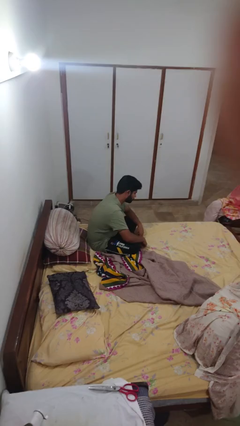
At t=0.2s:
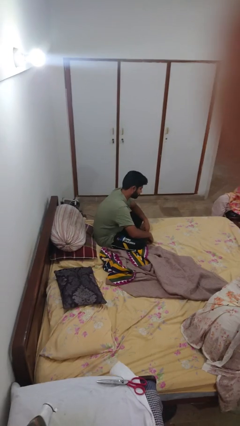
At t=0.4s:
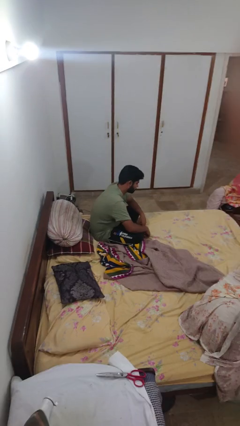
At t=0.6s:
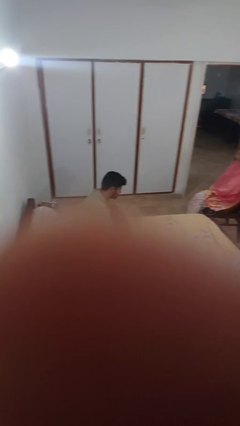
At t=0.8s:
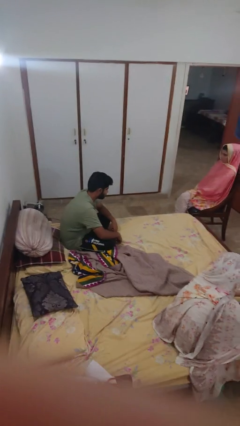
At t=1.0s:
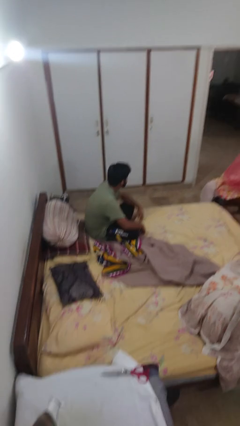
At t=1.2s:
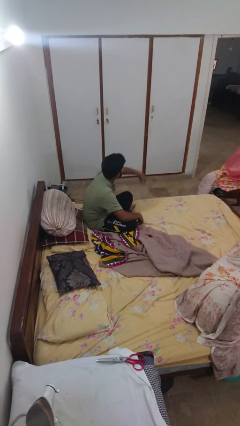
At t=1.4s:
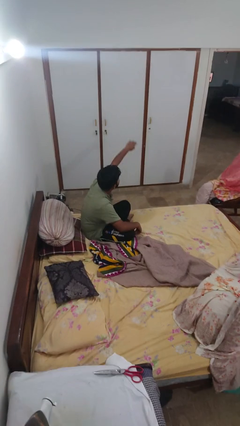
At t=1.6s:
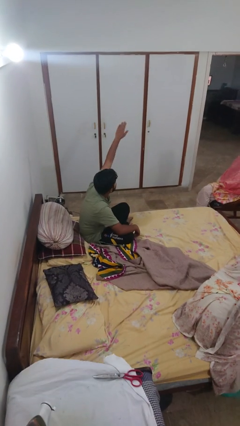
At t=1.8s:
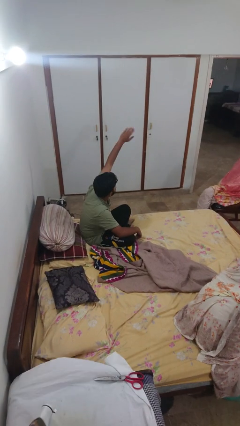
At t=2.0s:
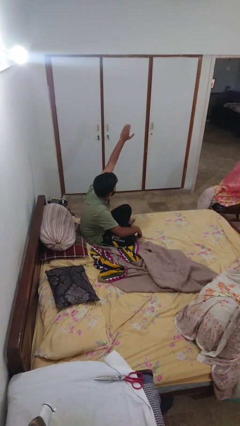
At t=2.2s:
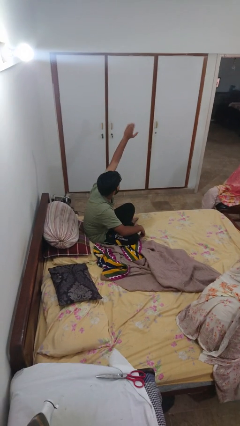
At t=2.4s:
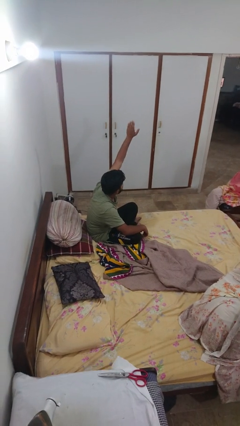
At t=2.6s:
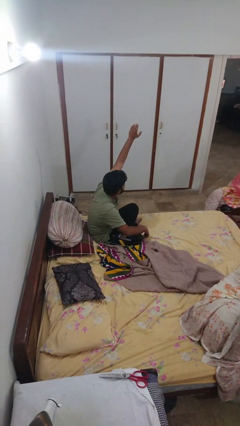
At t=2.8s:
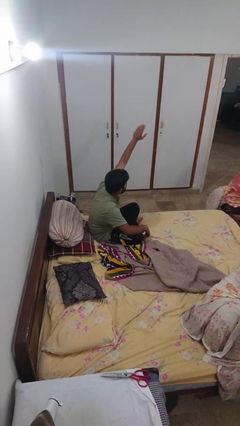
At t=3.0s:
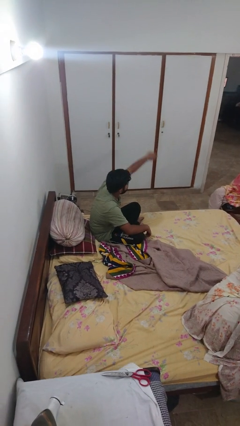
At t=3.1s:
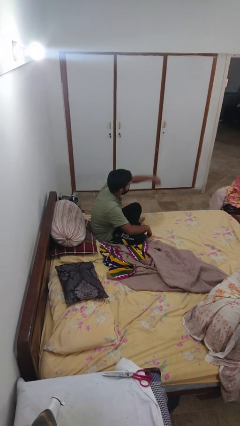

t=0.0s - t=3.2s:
person waves at person

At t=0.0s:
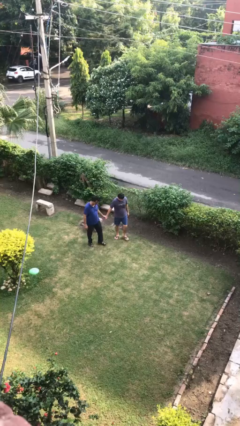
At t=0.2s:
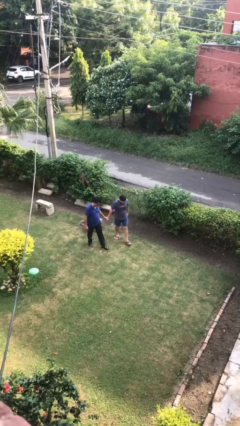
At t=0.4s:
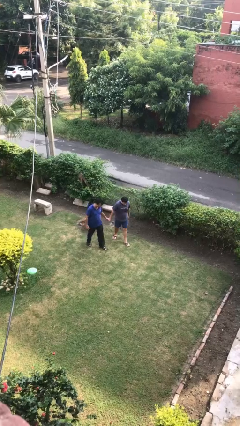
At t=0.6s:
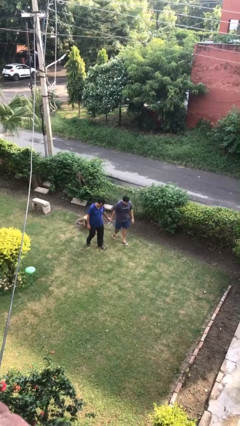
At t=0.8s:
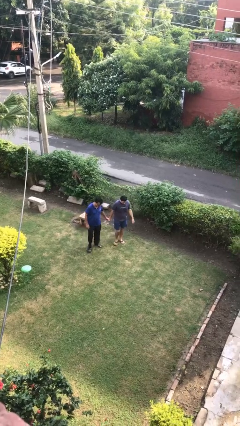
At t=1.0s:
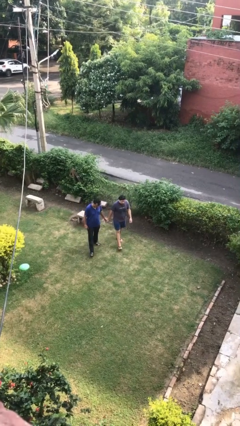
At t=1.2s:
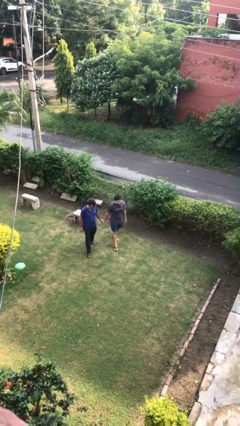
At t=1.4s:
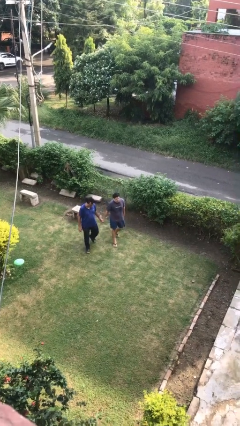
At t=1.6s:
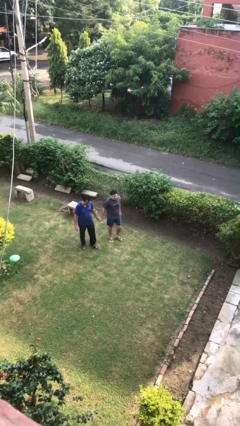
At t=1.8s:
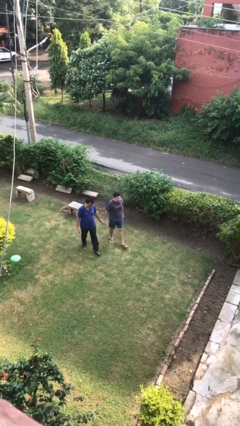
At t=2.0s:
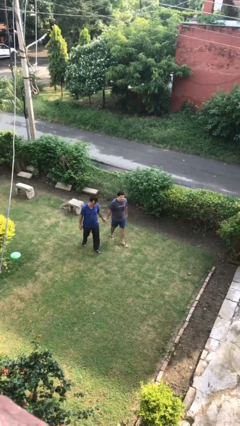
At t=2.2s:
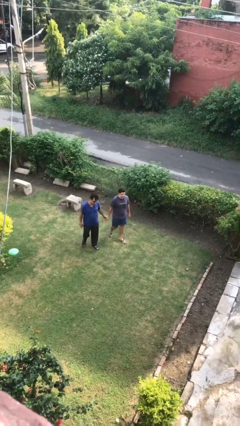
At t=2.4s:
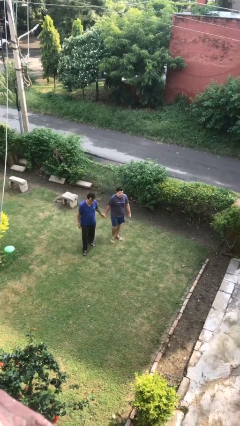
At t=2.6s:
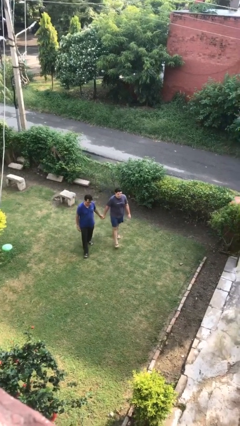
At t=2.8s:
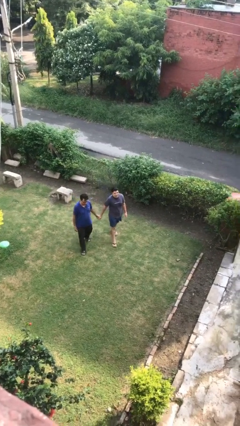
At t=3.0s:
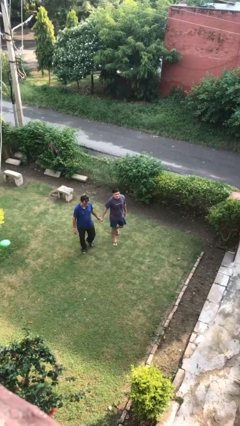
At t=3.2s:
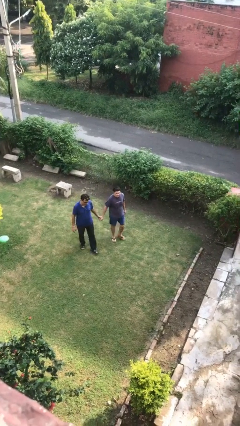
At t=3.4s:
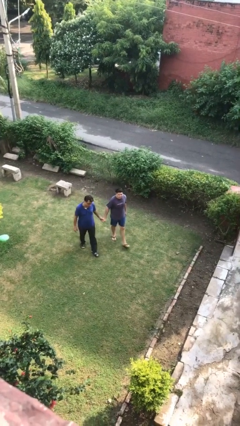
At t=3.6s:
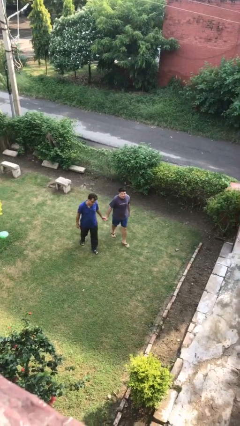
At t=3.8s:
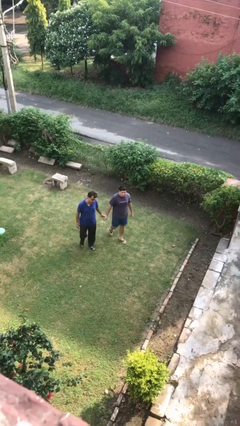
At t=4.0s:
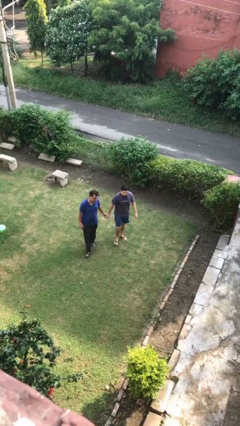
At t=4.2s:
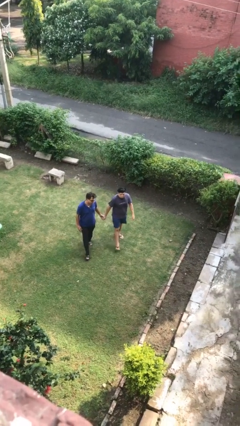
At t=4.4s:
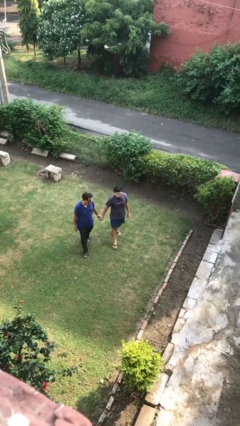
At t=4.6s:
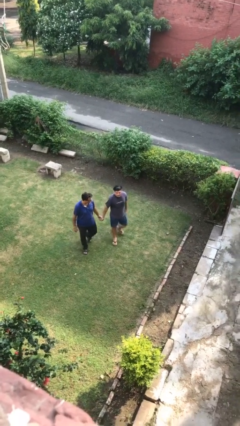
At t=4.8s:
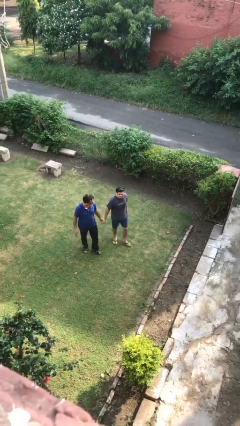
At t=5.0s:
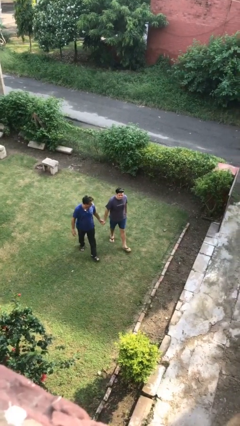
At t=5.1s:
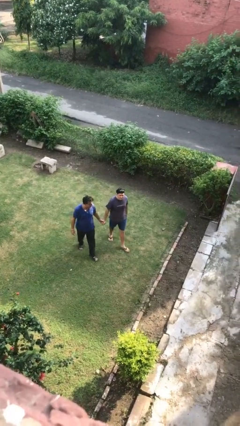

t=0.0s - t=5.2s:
person holds hand

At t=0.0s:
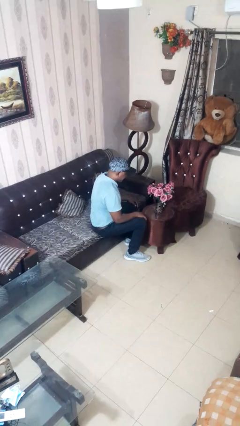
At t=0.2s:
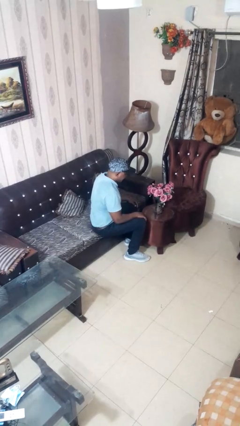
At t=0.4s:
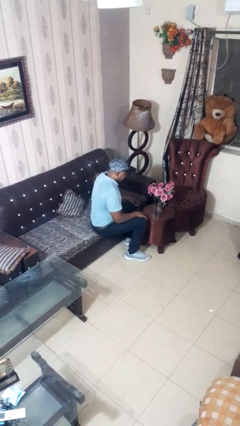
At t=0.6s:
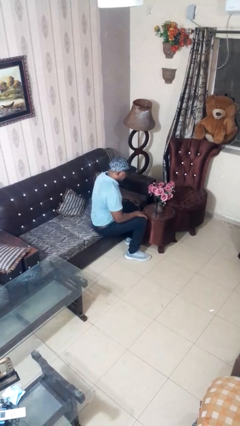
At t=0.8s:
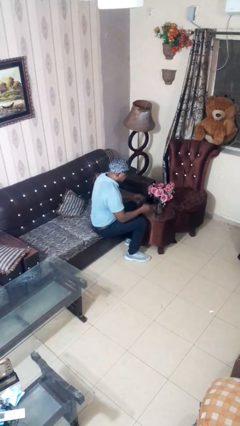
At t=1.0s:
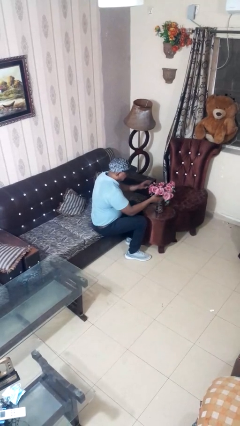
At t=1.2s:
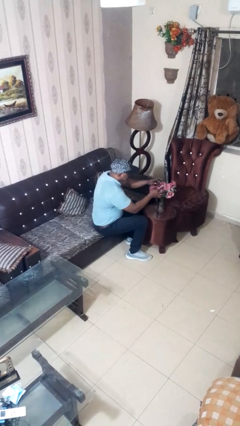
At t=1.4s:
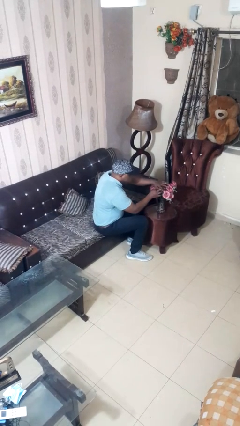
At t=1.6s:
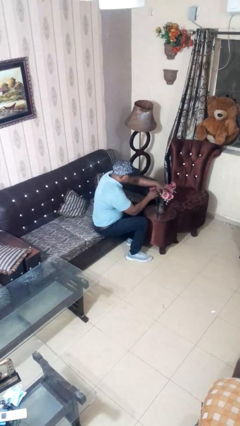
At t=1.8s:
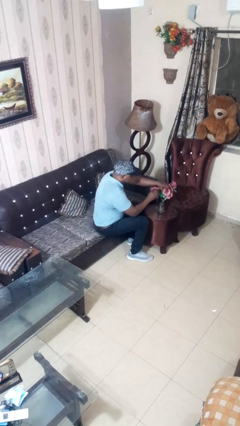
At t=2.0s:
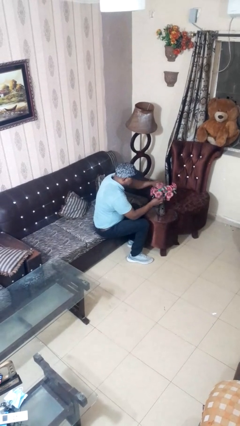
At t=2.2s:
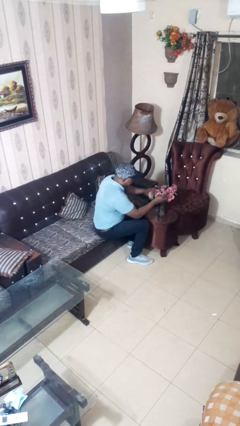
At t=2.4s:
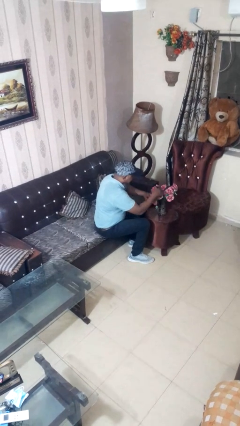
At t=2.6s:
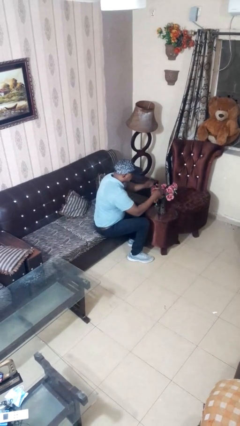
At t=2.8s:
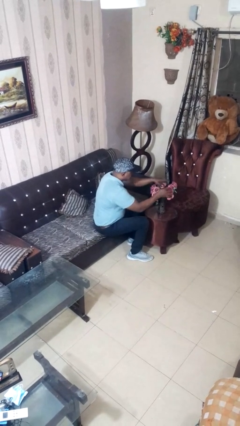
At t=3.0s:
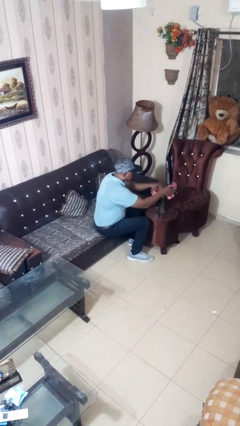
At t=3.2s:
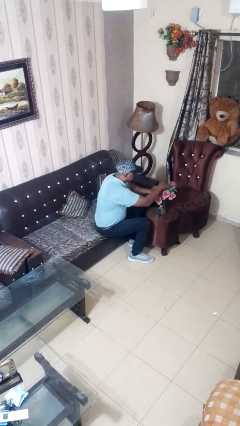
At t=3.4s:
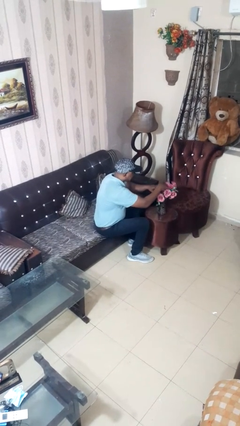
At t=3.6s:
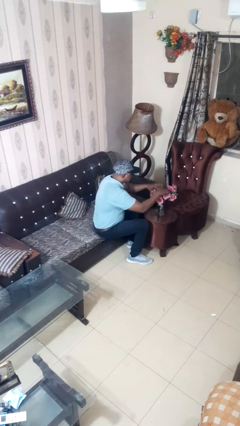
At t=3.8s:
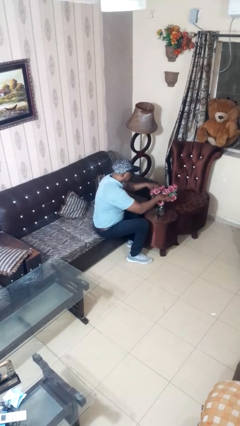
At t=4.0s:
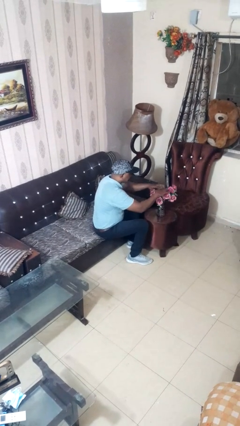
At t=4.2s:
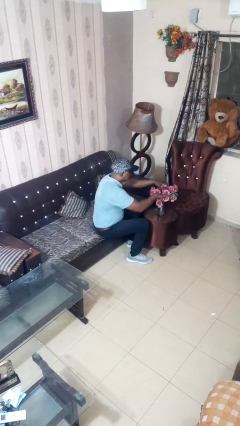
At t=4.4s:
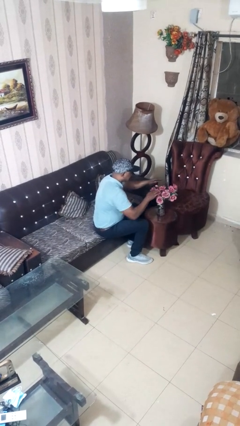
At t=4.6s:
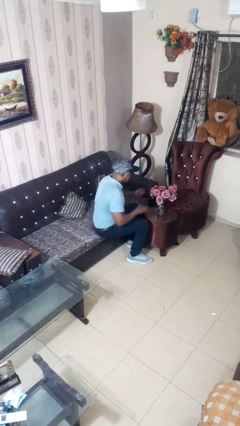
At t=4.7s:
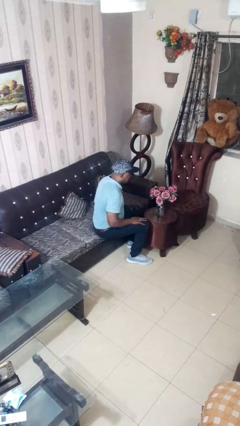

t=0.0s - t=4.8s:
person arranges flowers in vase

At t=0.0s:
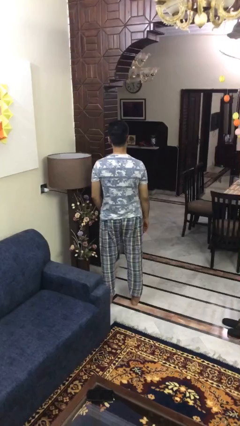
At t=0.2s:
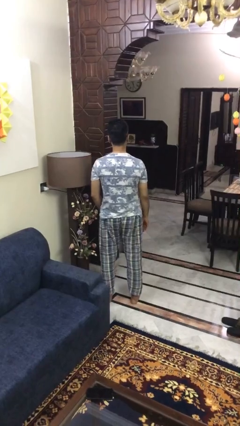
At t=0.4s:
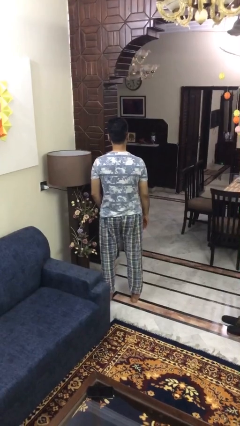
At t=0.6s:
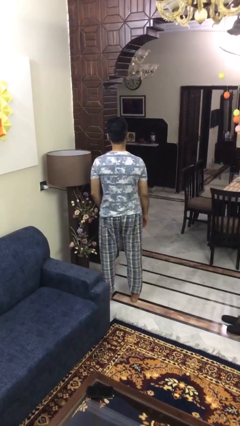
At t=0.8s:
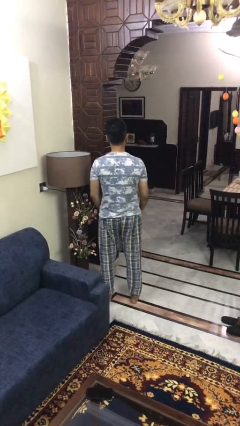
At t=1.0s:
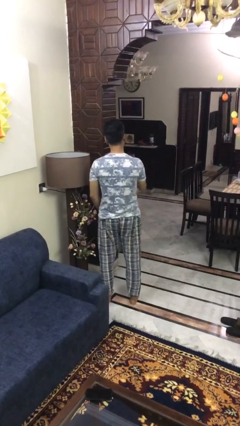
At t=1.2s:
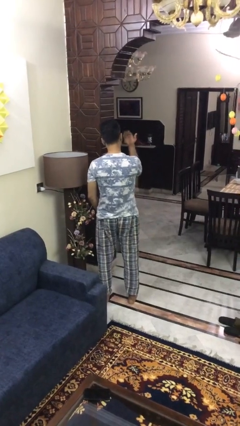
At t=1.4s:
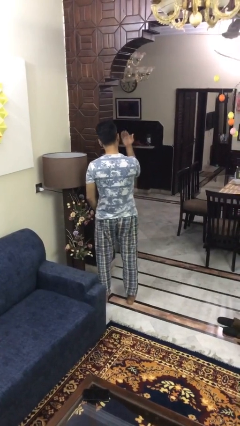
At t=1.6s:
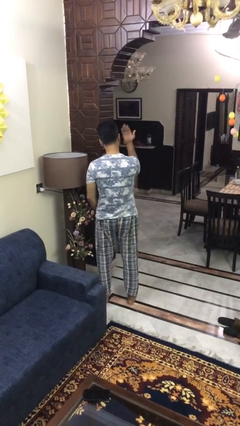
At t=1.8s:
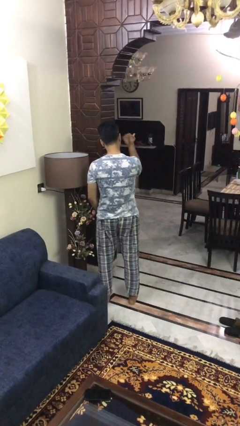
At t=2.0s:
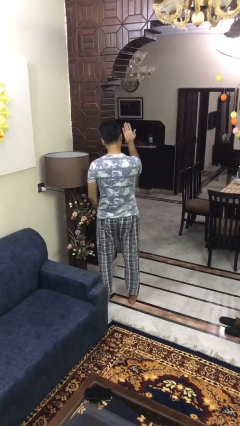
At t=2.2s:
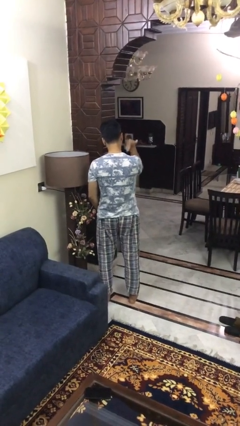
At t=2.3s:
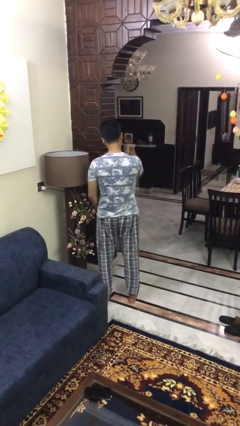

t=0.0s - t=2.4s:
person gestures come here

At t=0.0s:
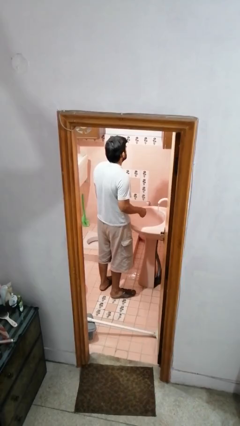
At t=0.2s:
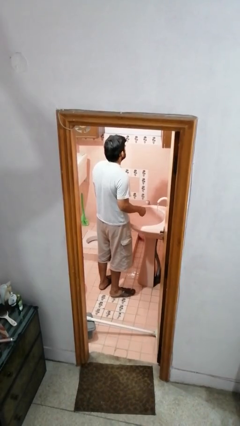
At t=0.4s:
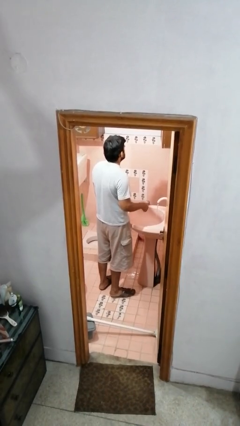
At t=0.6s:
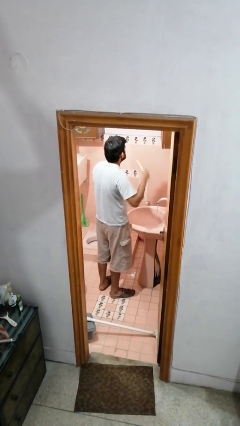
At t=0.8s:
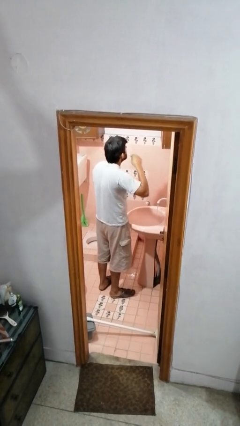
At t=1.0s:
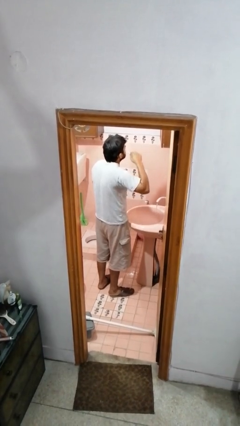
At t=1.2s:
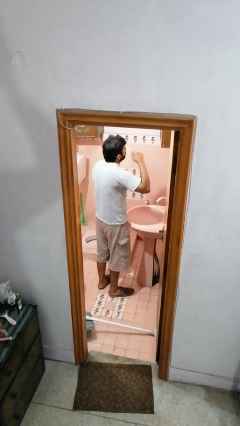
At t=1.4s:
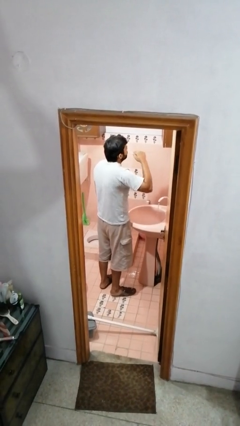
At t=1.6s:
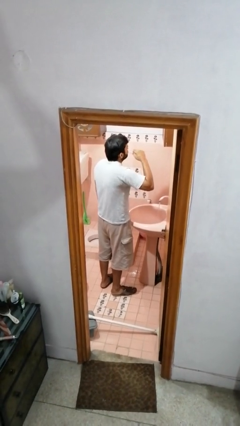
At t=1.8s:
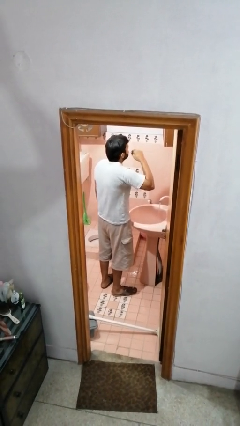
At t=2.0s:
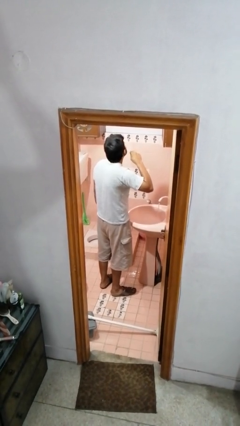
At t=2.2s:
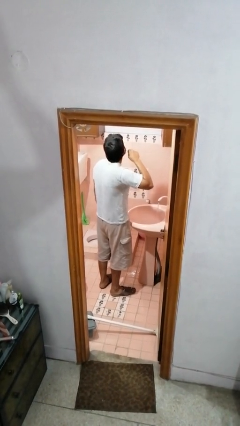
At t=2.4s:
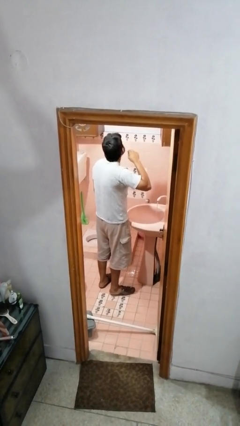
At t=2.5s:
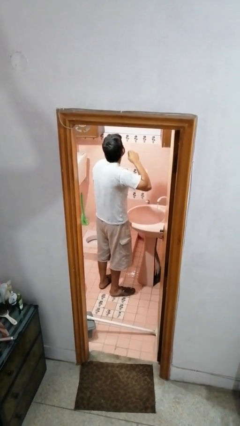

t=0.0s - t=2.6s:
person brushes teeth
